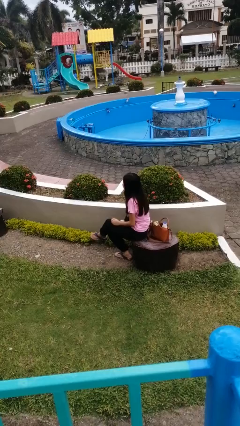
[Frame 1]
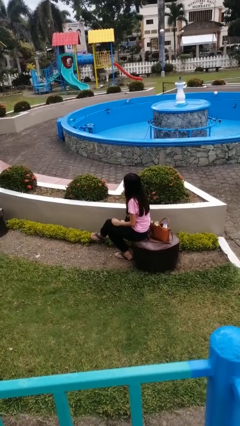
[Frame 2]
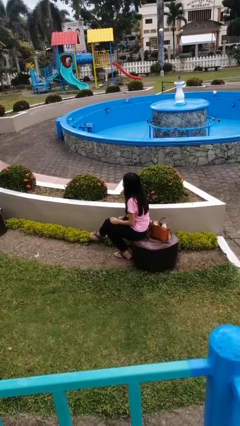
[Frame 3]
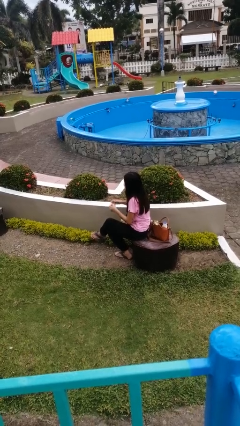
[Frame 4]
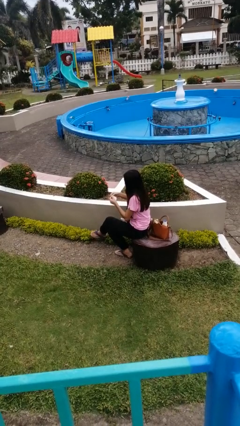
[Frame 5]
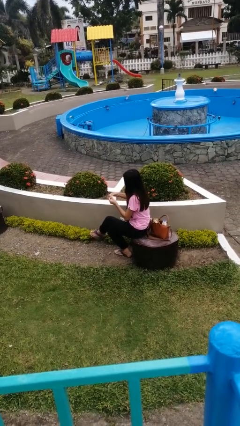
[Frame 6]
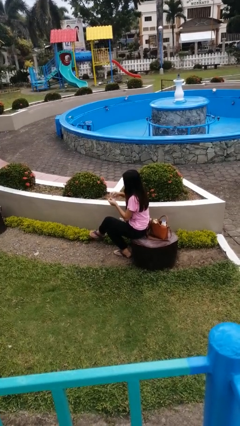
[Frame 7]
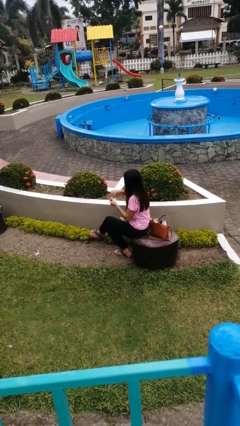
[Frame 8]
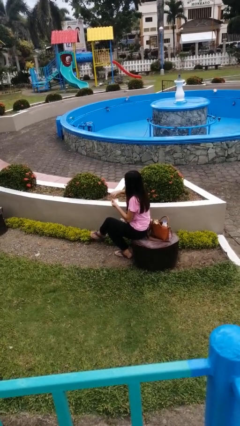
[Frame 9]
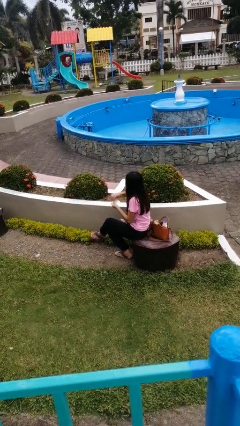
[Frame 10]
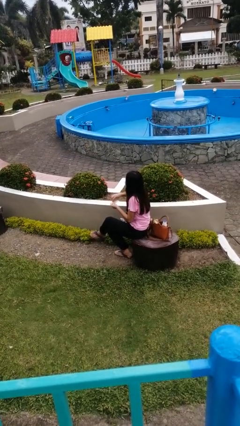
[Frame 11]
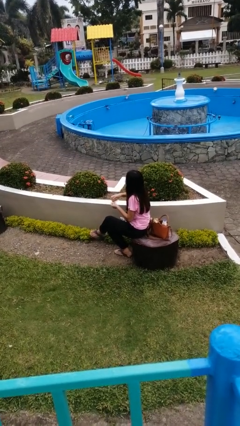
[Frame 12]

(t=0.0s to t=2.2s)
person takes medicine pills

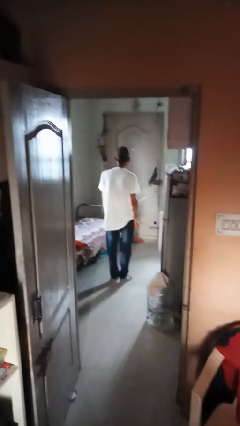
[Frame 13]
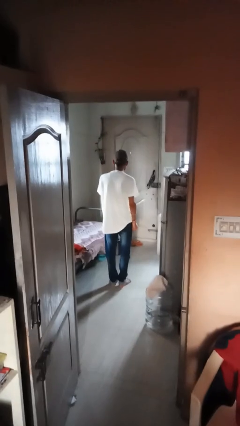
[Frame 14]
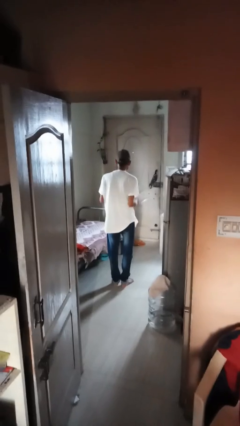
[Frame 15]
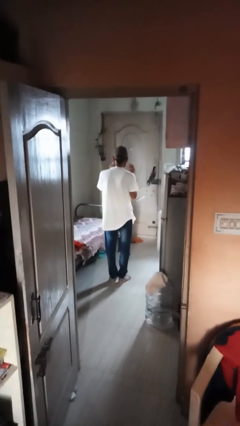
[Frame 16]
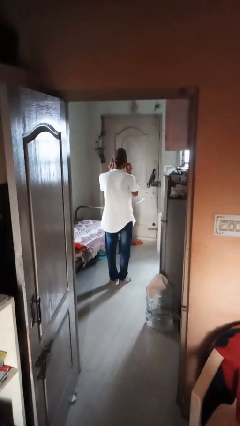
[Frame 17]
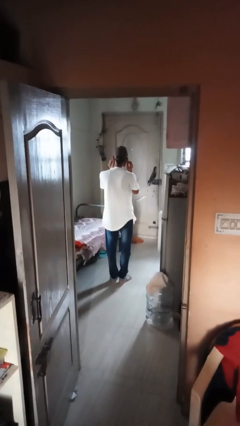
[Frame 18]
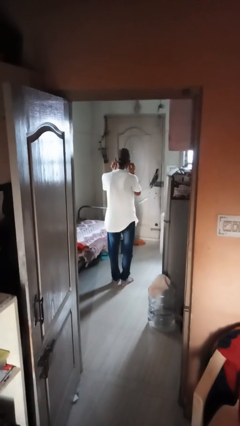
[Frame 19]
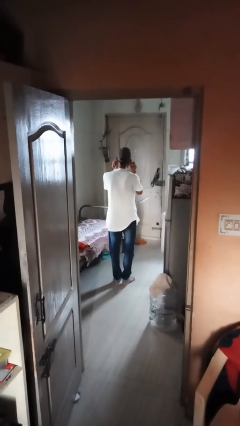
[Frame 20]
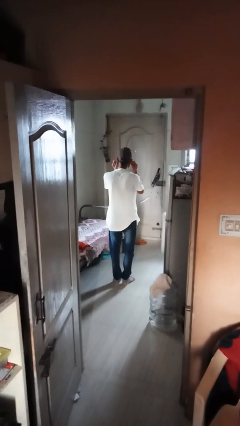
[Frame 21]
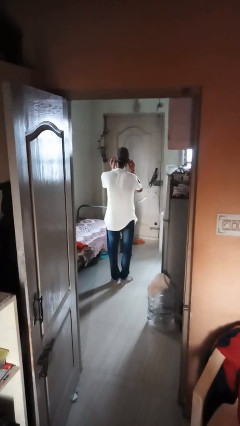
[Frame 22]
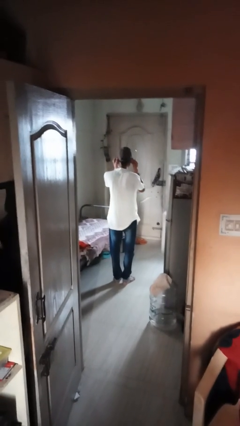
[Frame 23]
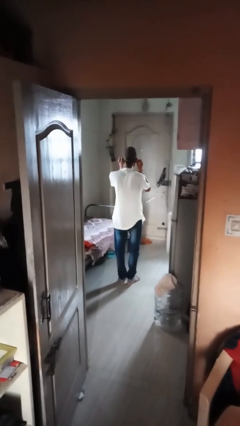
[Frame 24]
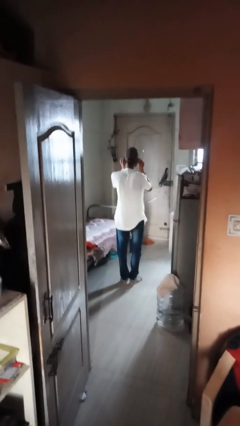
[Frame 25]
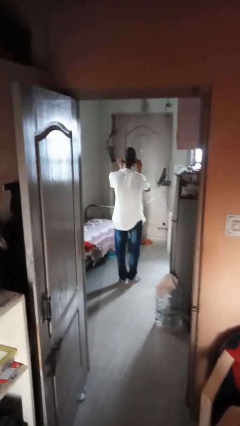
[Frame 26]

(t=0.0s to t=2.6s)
person touches earlobe

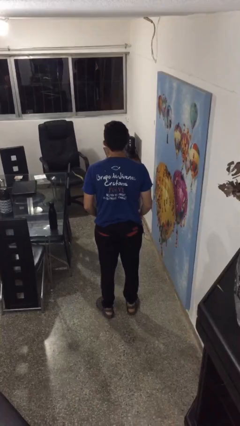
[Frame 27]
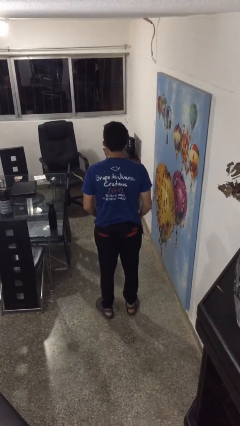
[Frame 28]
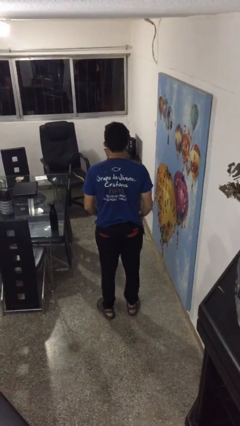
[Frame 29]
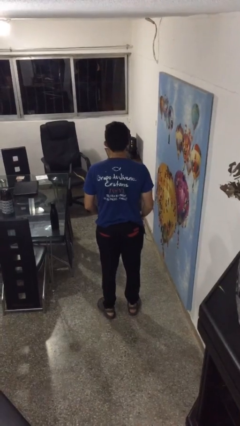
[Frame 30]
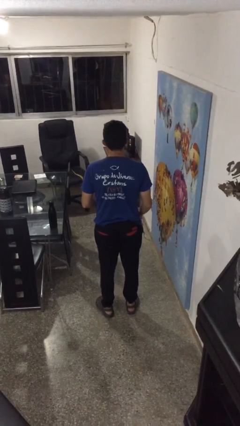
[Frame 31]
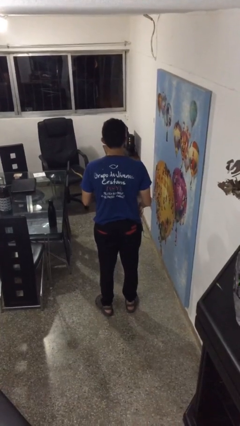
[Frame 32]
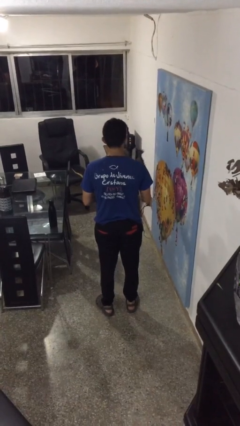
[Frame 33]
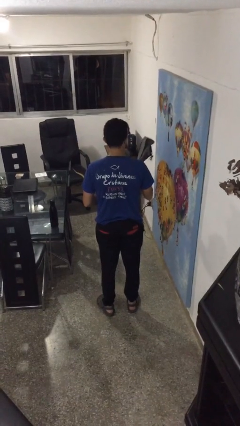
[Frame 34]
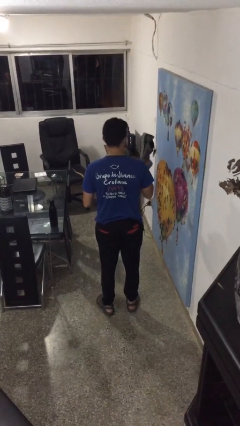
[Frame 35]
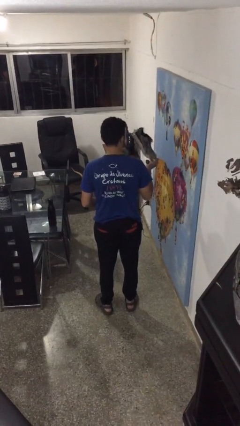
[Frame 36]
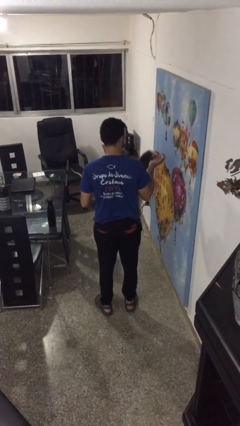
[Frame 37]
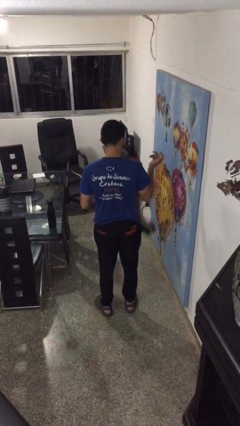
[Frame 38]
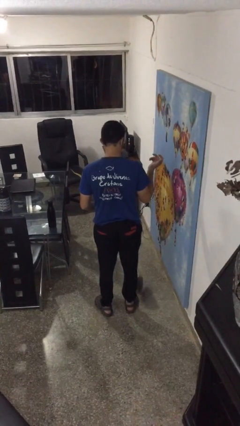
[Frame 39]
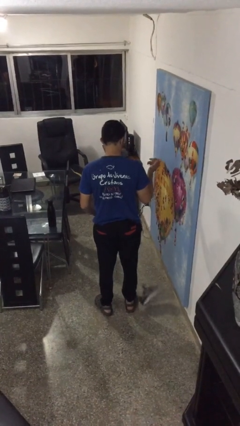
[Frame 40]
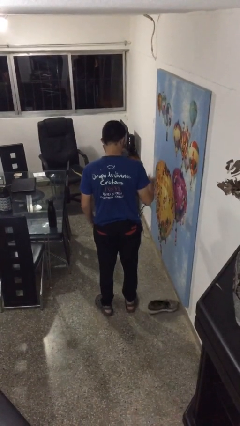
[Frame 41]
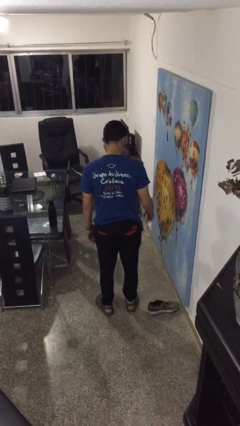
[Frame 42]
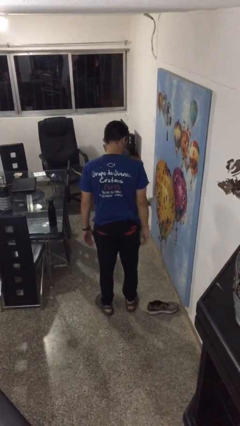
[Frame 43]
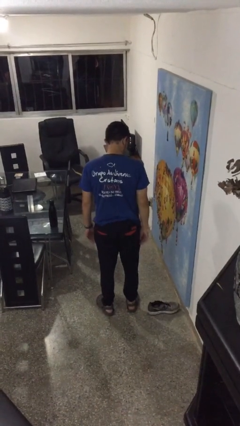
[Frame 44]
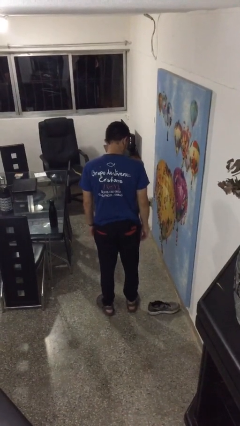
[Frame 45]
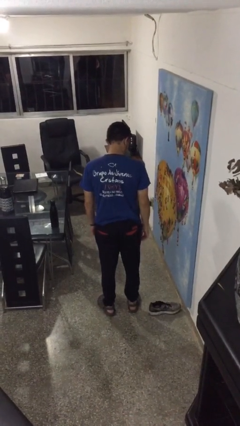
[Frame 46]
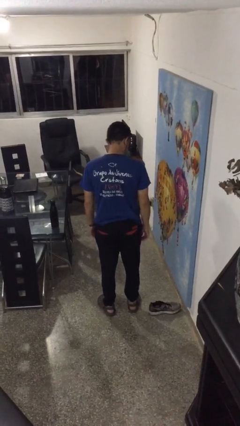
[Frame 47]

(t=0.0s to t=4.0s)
person drops object

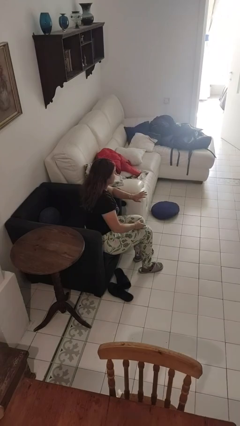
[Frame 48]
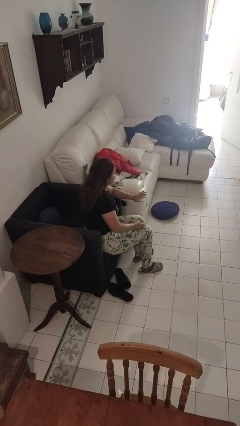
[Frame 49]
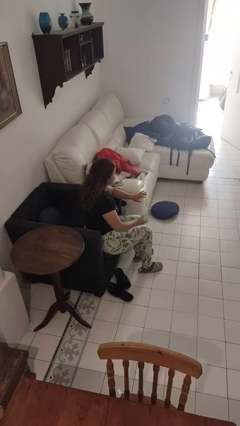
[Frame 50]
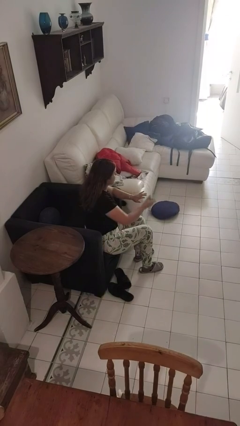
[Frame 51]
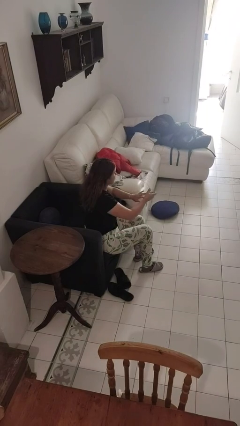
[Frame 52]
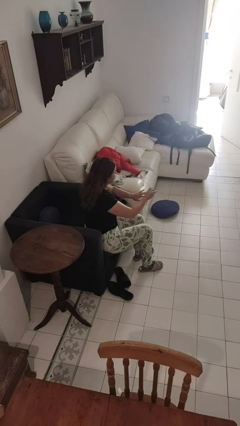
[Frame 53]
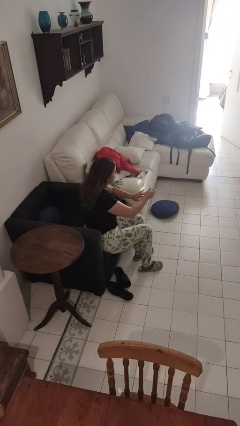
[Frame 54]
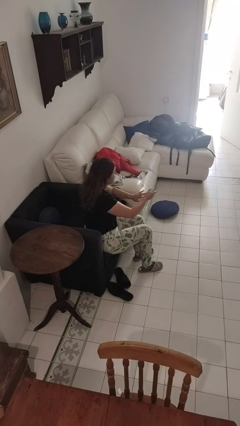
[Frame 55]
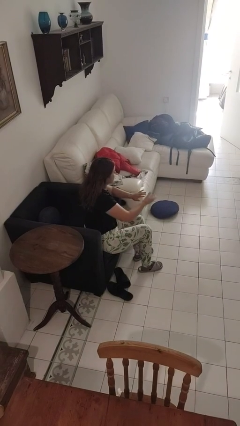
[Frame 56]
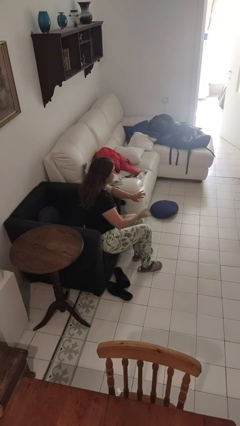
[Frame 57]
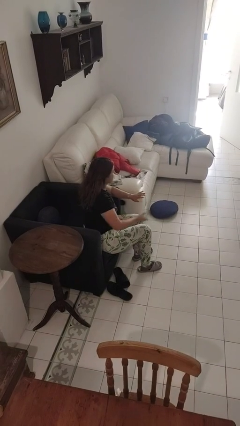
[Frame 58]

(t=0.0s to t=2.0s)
person clips fingernails

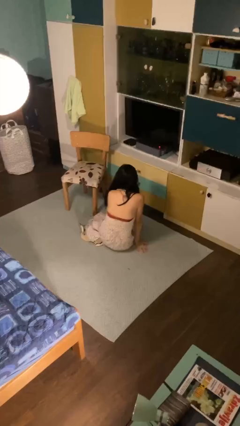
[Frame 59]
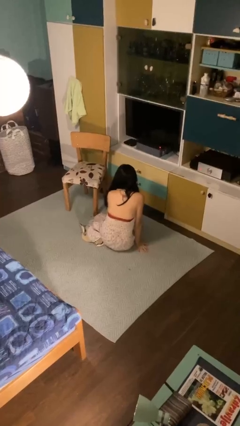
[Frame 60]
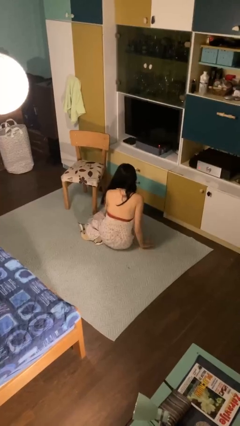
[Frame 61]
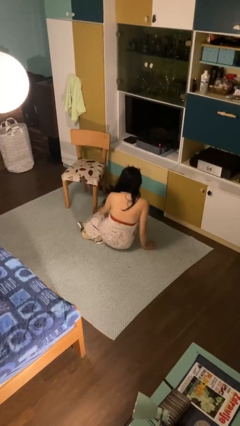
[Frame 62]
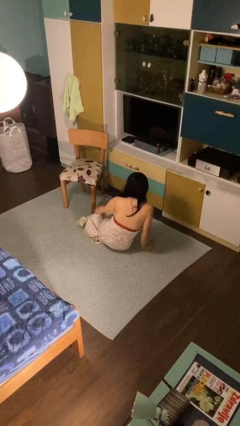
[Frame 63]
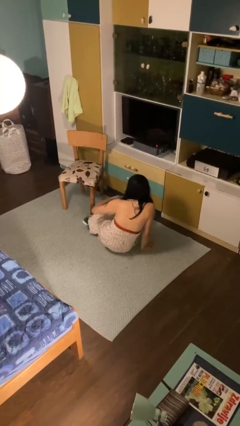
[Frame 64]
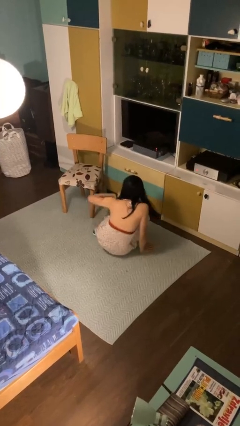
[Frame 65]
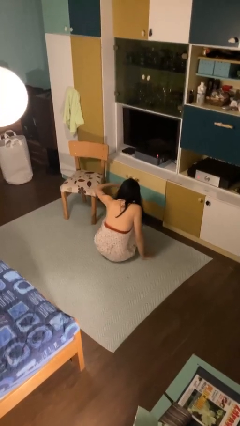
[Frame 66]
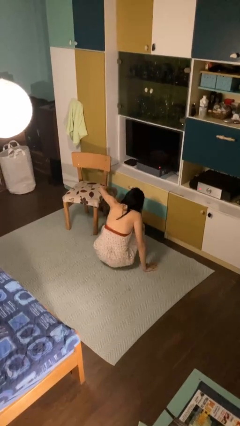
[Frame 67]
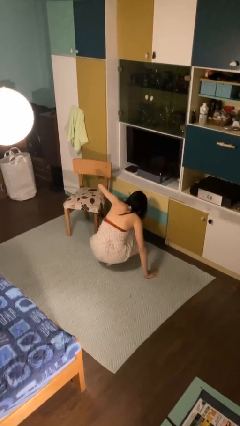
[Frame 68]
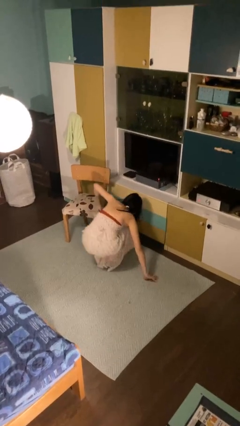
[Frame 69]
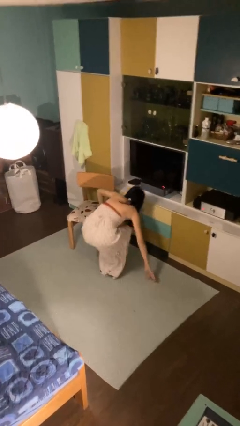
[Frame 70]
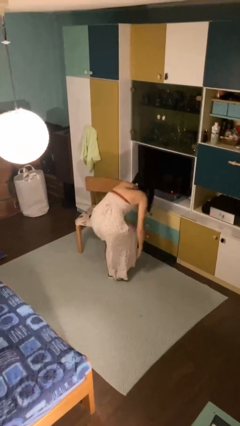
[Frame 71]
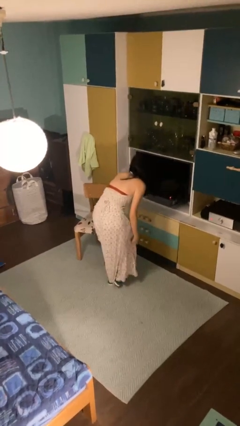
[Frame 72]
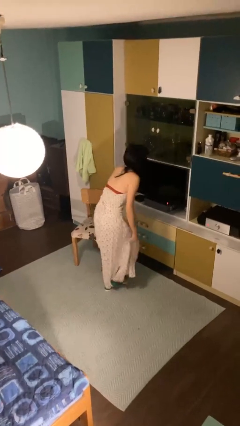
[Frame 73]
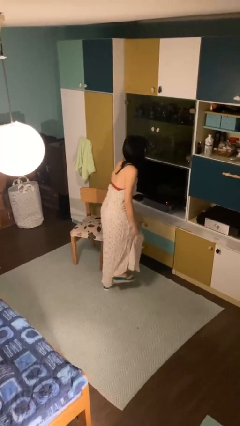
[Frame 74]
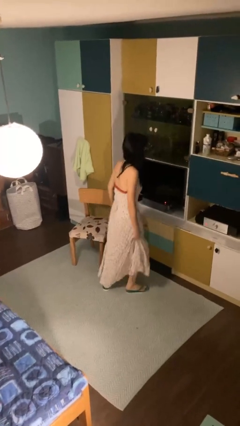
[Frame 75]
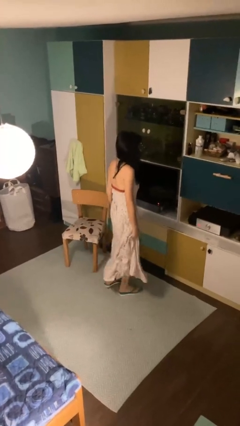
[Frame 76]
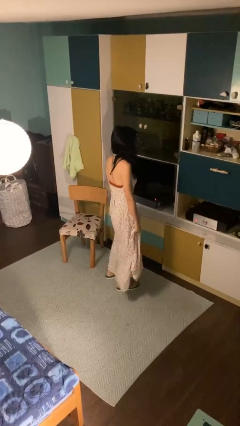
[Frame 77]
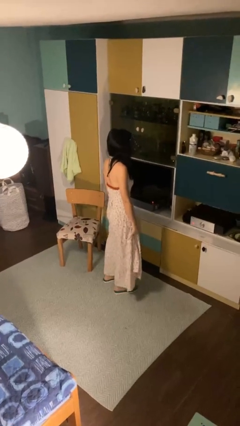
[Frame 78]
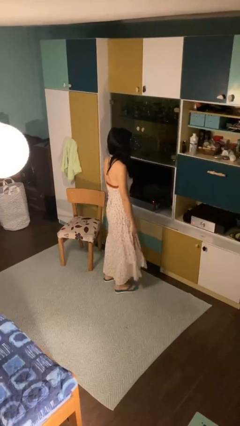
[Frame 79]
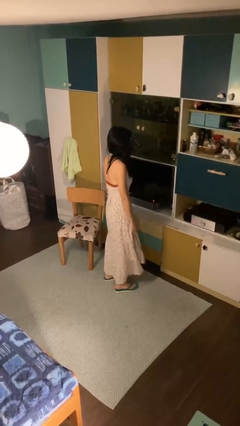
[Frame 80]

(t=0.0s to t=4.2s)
person stands up from floor

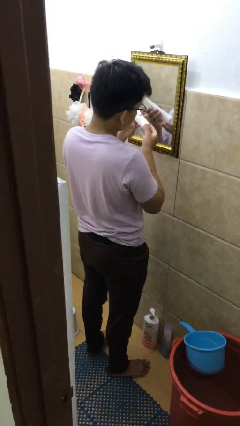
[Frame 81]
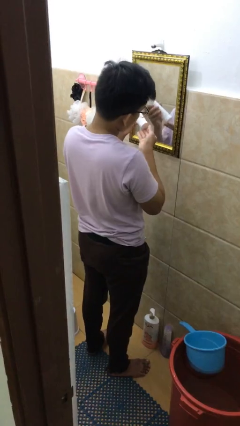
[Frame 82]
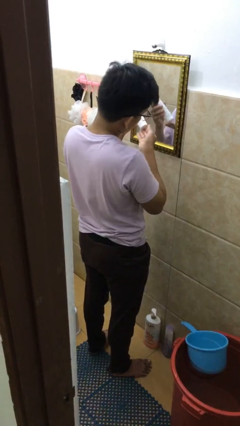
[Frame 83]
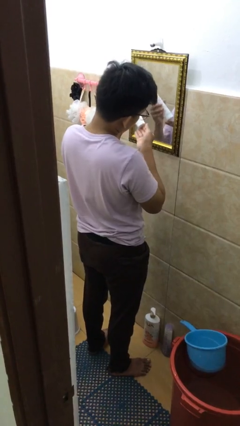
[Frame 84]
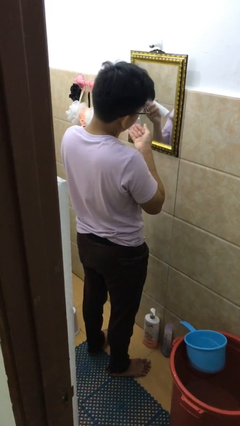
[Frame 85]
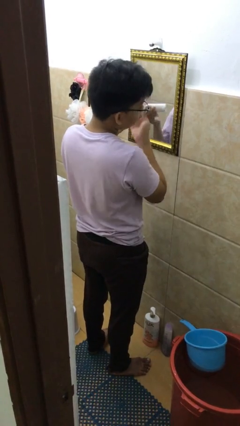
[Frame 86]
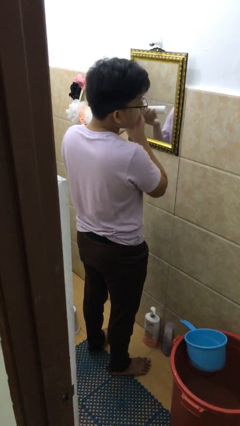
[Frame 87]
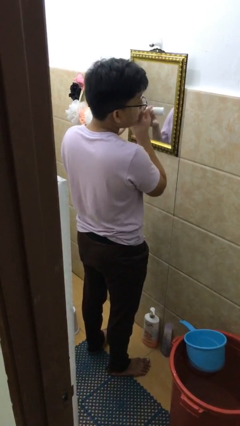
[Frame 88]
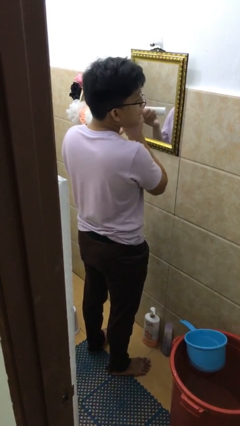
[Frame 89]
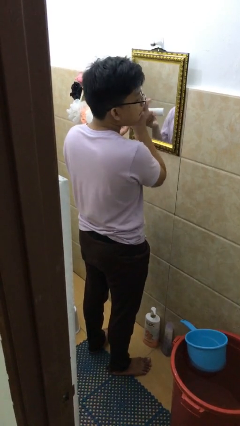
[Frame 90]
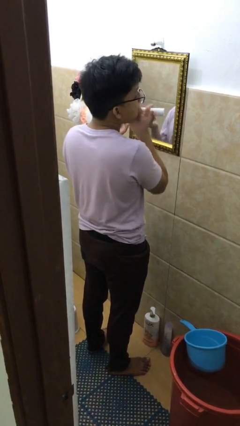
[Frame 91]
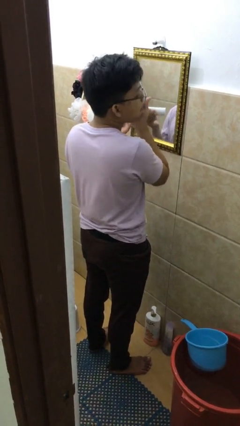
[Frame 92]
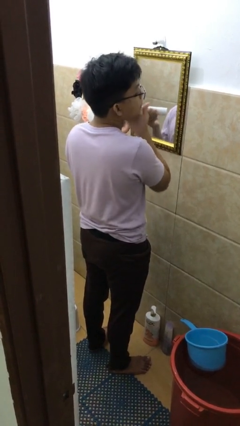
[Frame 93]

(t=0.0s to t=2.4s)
person applies facial moisturizer
